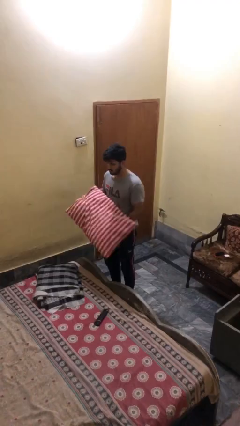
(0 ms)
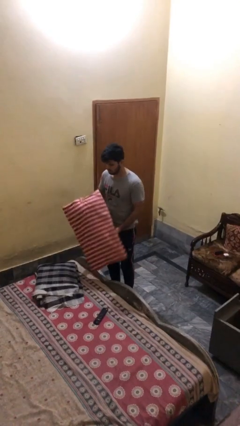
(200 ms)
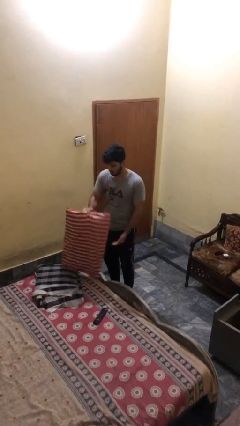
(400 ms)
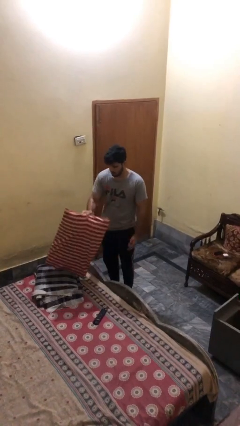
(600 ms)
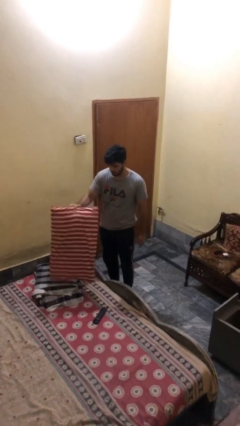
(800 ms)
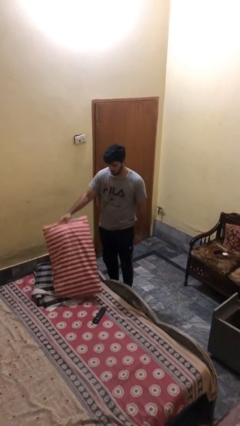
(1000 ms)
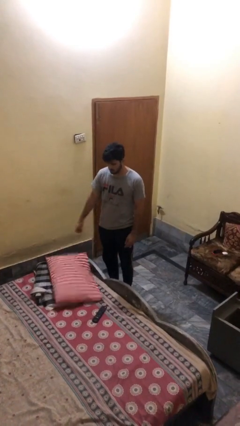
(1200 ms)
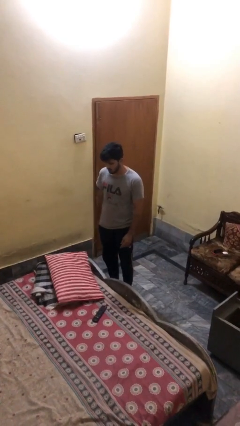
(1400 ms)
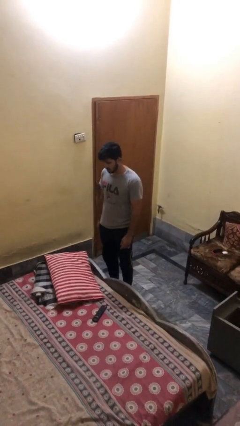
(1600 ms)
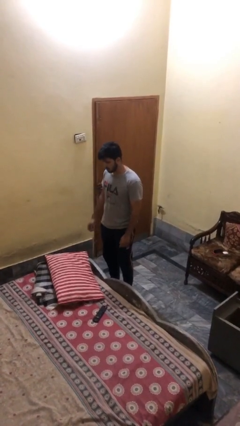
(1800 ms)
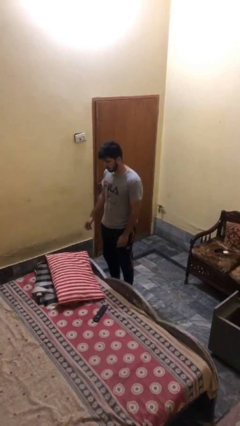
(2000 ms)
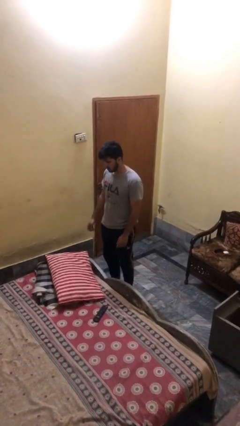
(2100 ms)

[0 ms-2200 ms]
person puts down object on bed

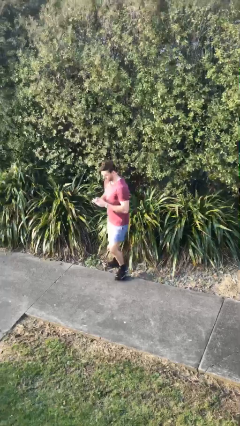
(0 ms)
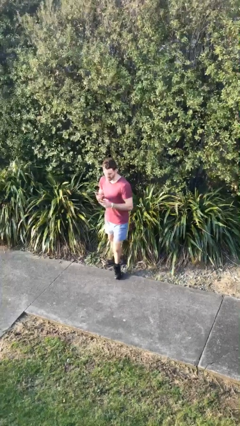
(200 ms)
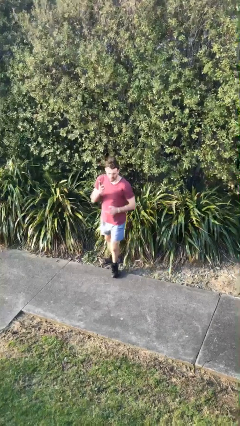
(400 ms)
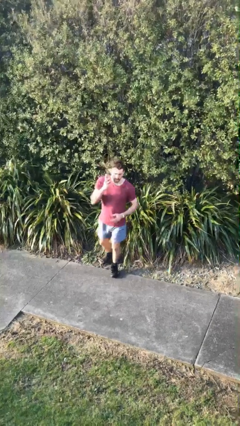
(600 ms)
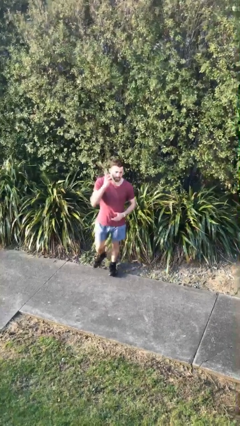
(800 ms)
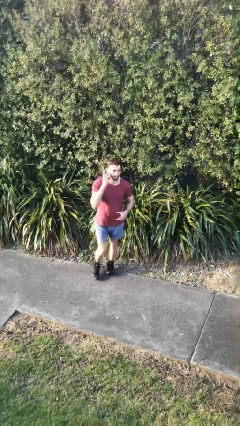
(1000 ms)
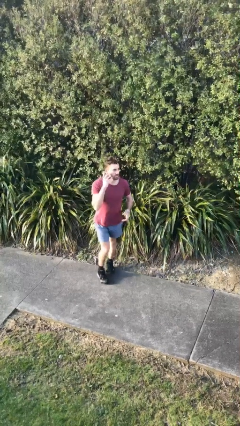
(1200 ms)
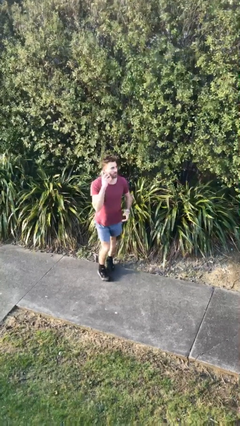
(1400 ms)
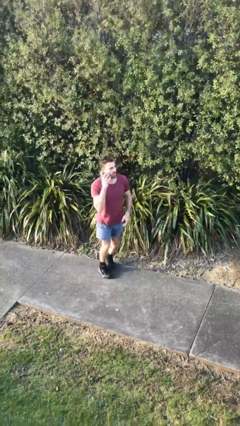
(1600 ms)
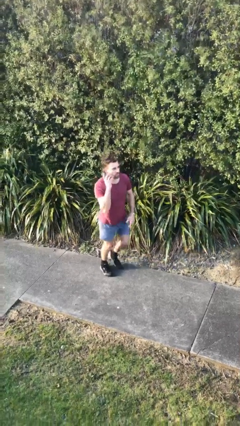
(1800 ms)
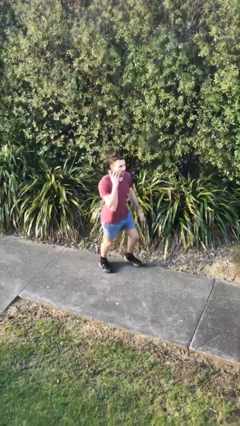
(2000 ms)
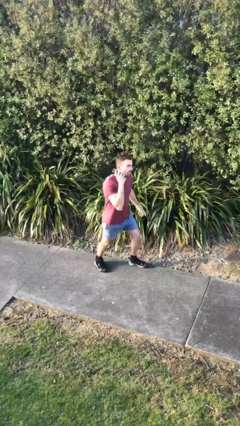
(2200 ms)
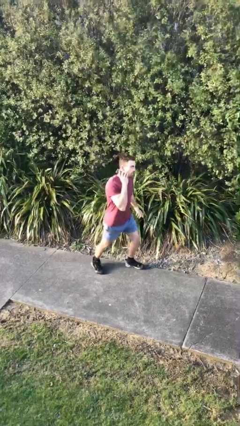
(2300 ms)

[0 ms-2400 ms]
person talks on phone

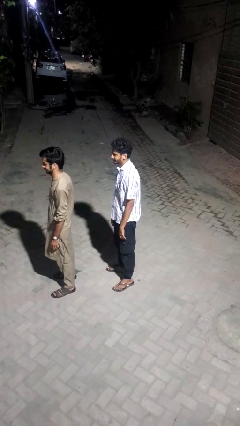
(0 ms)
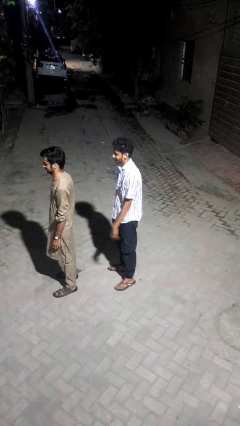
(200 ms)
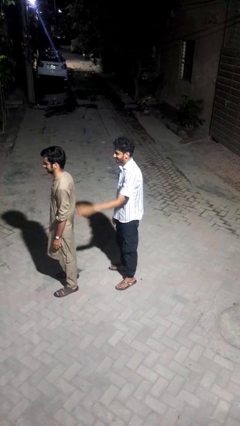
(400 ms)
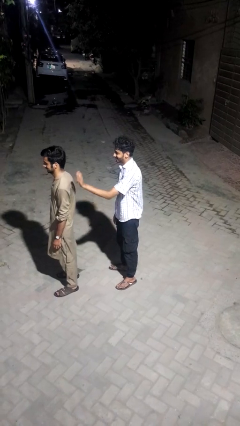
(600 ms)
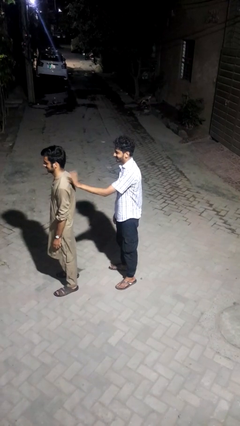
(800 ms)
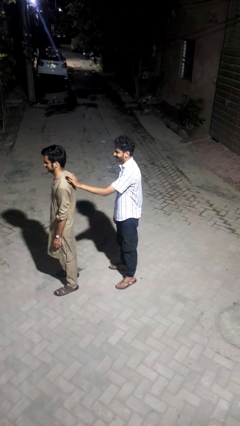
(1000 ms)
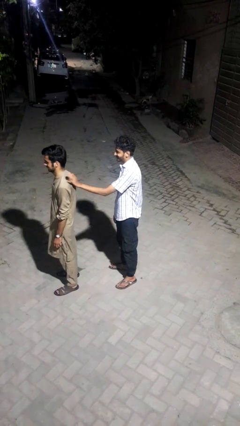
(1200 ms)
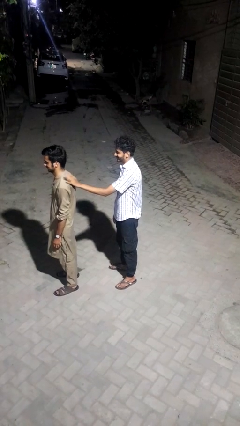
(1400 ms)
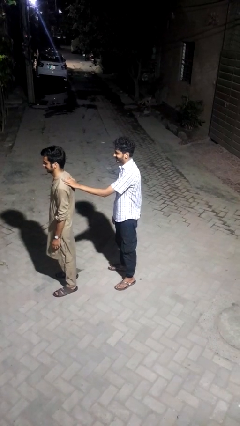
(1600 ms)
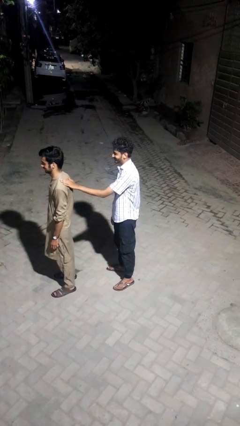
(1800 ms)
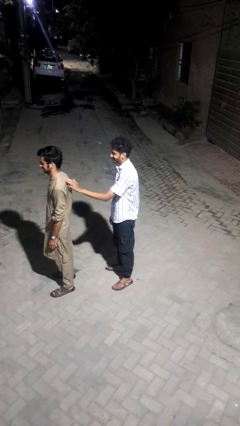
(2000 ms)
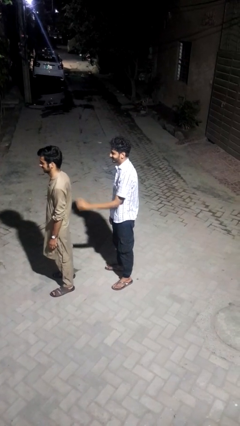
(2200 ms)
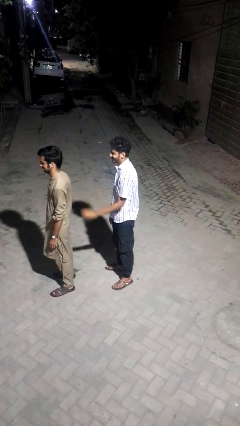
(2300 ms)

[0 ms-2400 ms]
person touches back of person

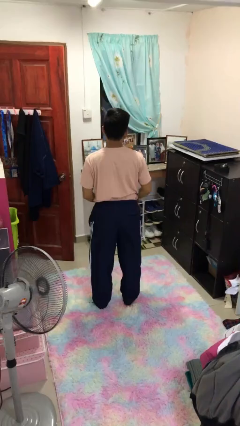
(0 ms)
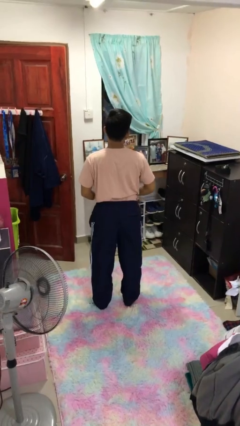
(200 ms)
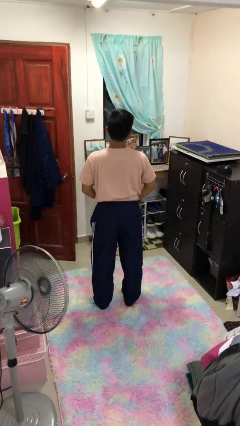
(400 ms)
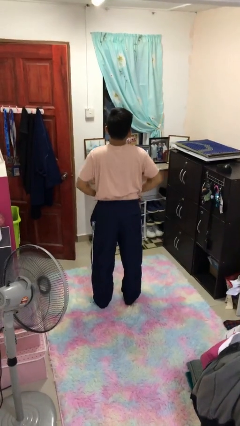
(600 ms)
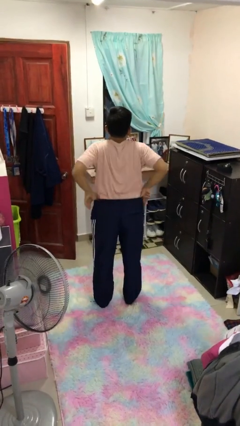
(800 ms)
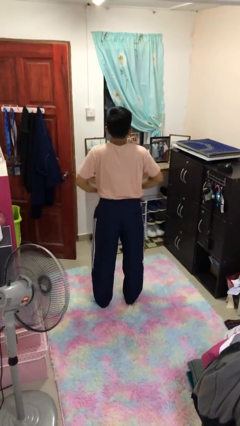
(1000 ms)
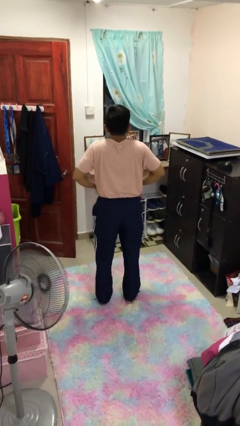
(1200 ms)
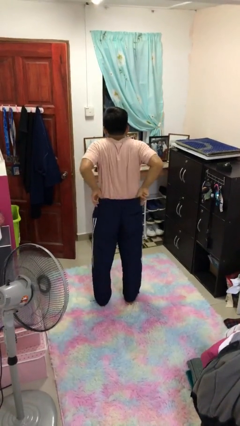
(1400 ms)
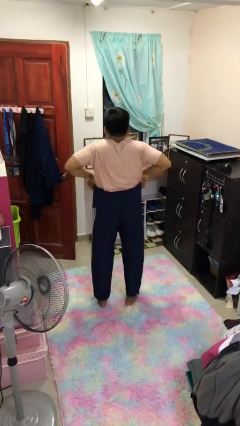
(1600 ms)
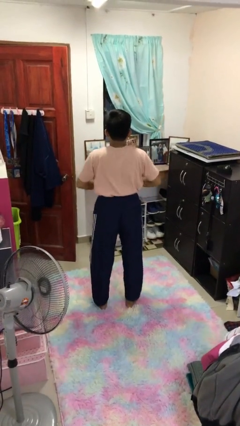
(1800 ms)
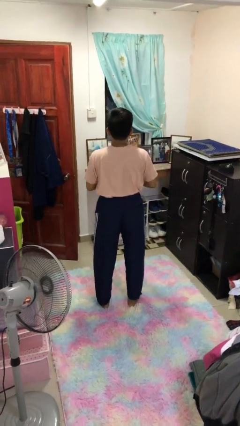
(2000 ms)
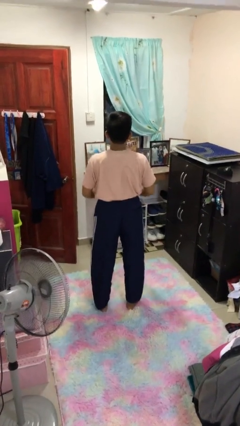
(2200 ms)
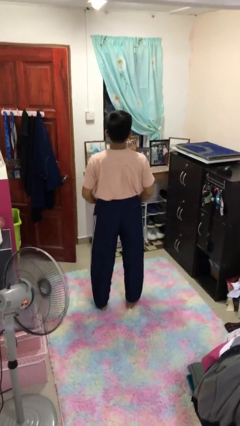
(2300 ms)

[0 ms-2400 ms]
person hikes up pants

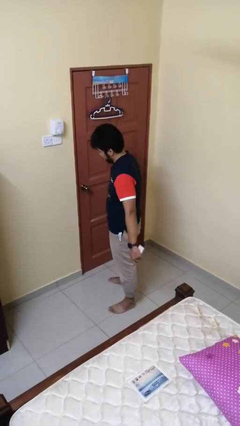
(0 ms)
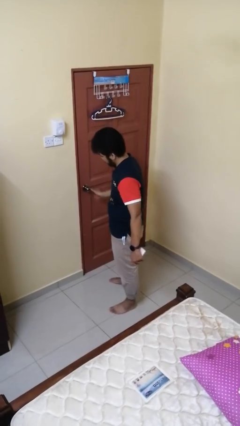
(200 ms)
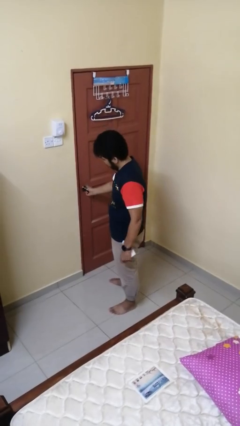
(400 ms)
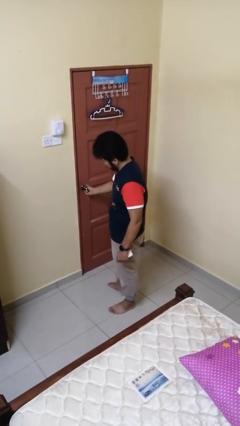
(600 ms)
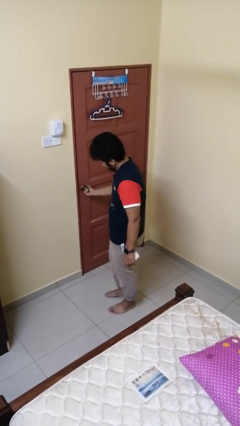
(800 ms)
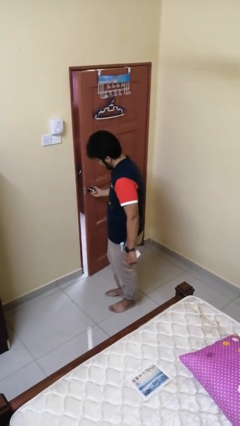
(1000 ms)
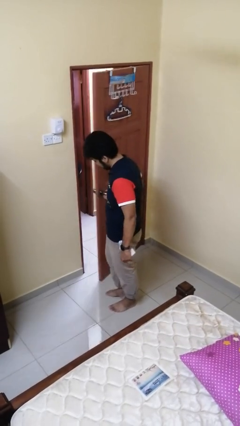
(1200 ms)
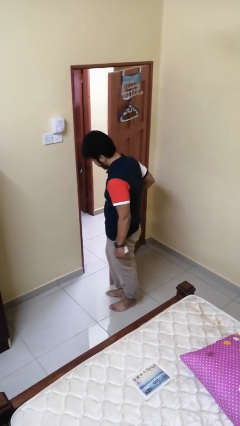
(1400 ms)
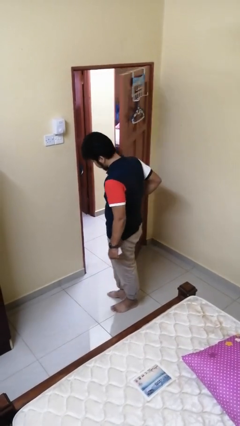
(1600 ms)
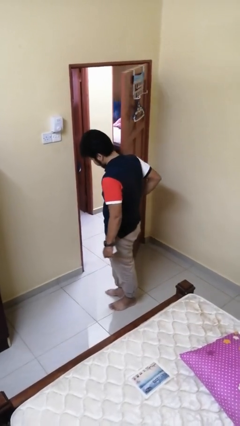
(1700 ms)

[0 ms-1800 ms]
person opens facility door

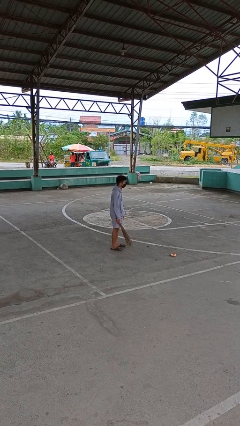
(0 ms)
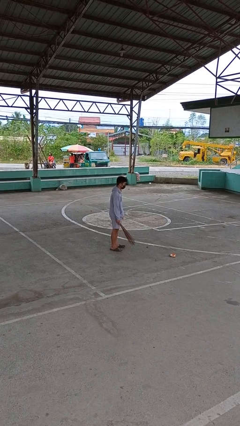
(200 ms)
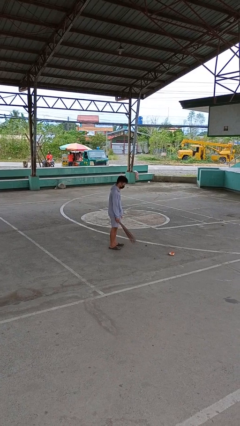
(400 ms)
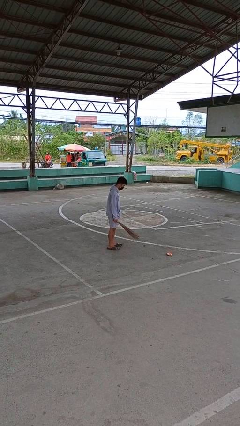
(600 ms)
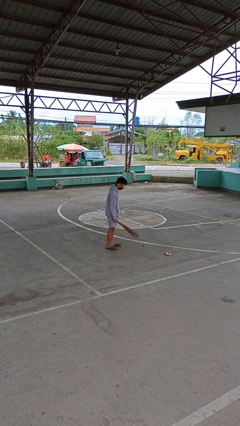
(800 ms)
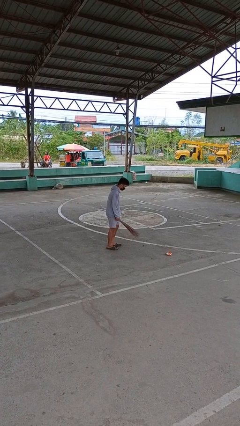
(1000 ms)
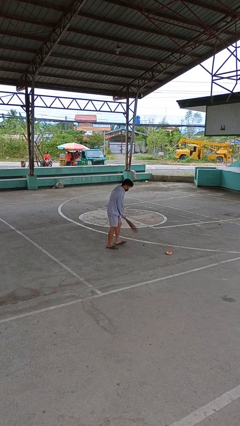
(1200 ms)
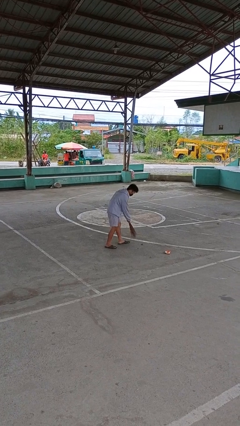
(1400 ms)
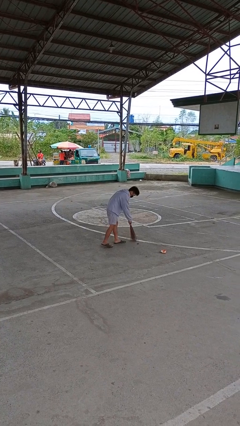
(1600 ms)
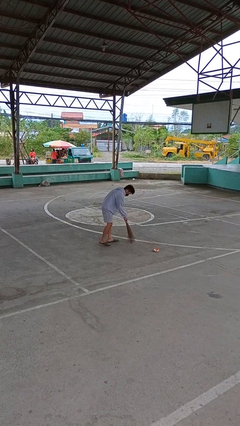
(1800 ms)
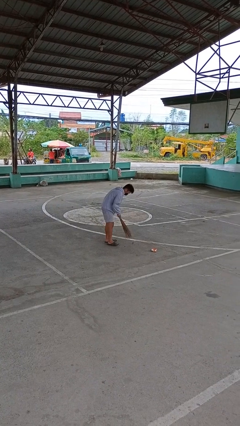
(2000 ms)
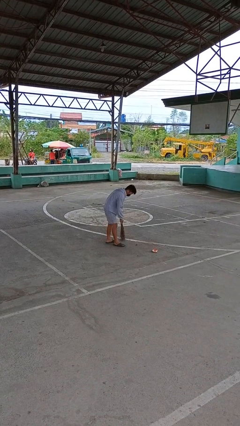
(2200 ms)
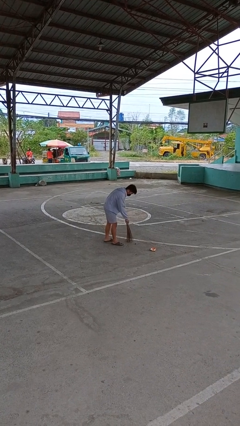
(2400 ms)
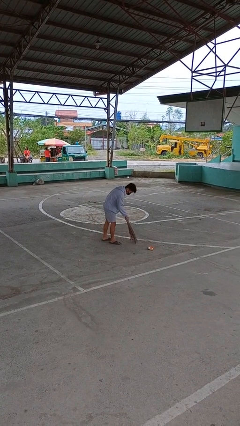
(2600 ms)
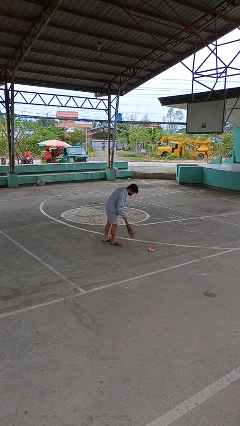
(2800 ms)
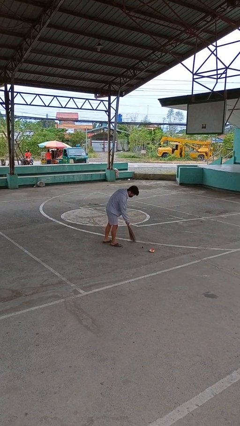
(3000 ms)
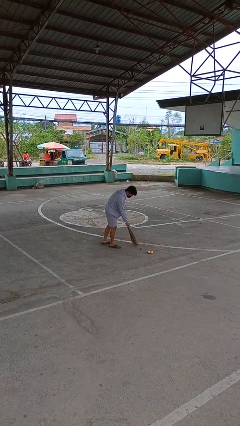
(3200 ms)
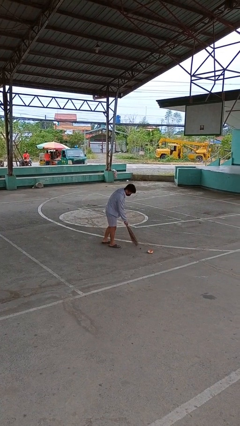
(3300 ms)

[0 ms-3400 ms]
person sweeps floor

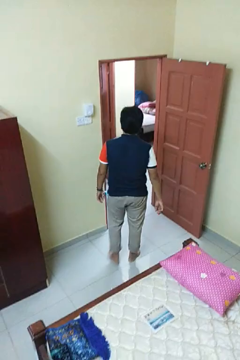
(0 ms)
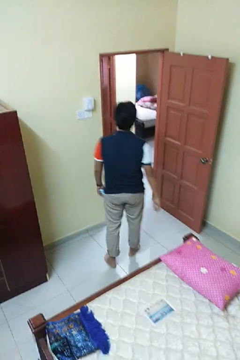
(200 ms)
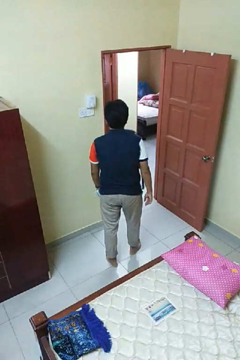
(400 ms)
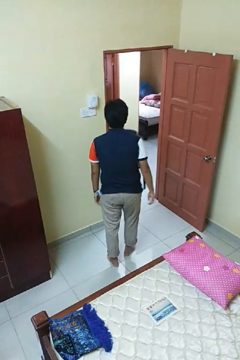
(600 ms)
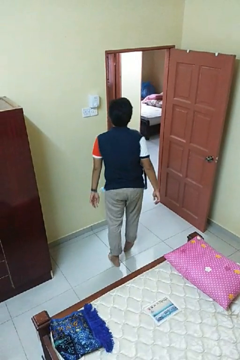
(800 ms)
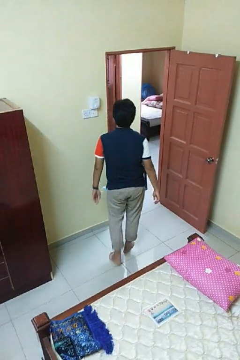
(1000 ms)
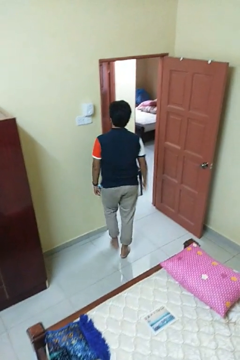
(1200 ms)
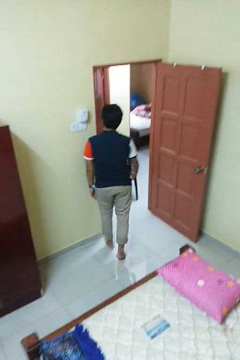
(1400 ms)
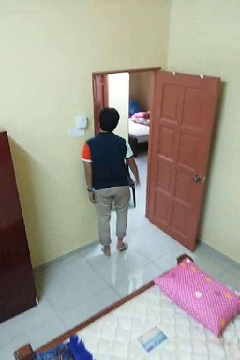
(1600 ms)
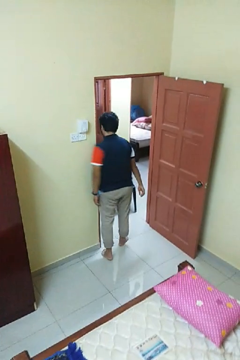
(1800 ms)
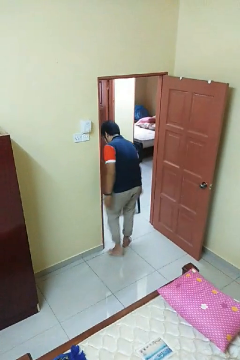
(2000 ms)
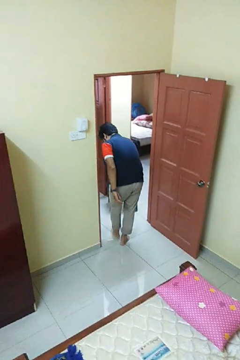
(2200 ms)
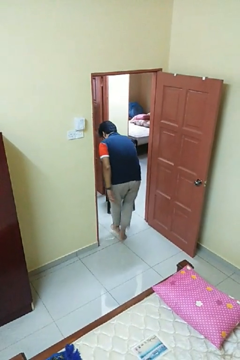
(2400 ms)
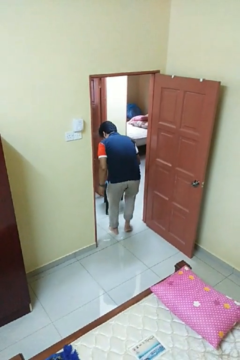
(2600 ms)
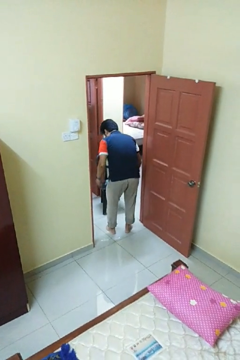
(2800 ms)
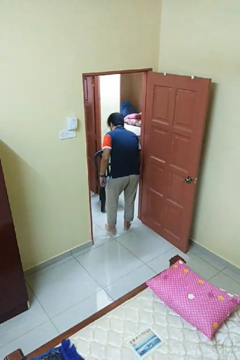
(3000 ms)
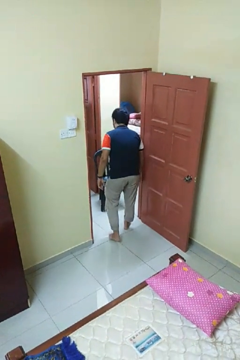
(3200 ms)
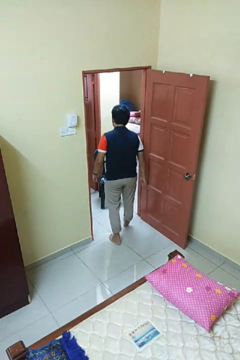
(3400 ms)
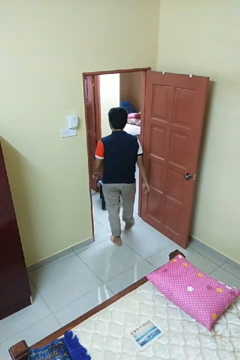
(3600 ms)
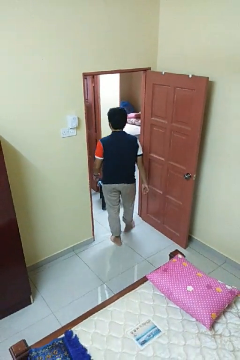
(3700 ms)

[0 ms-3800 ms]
person bumps into wall
